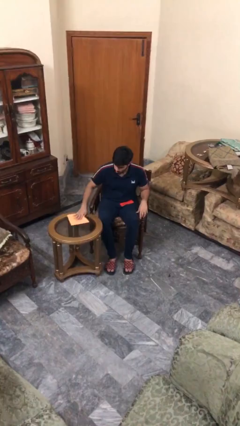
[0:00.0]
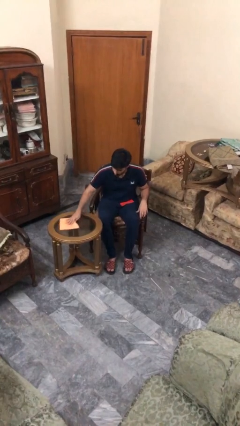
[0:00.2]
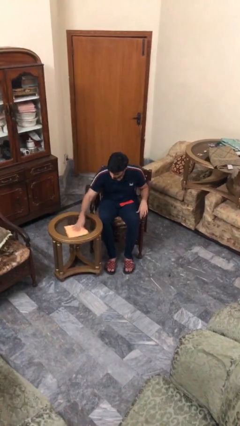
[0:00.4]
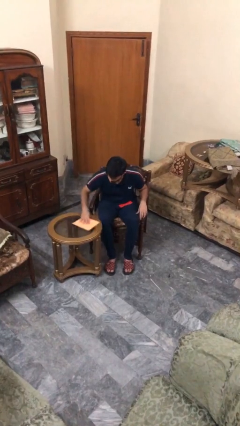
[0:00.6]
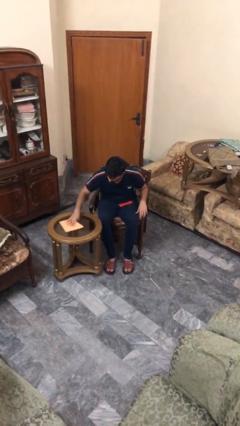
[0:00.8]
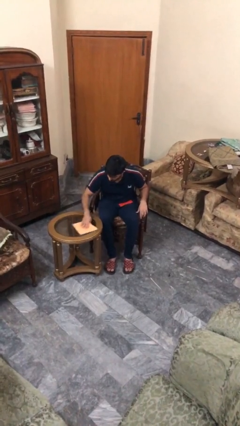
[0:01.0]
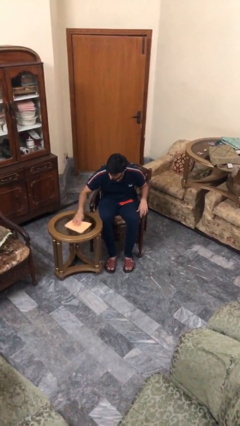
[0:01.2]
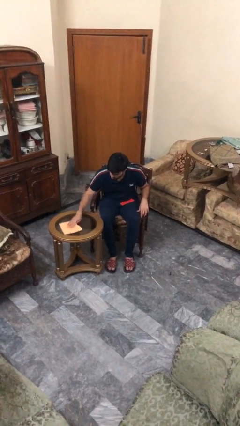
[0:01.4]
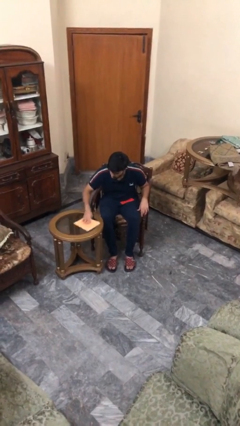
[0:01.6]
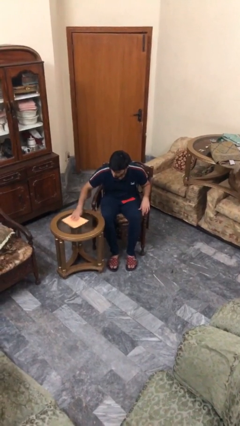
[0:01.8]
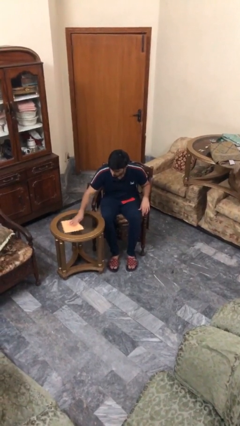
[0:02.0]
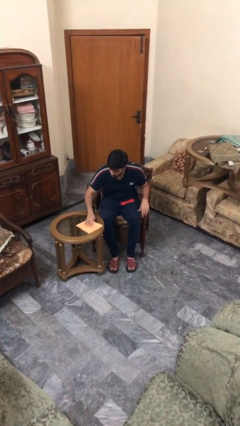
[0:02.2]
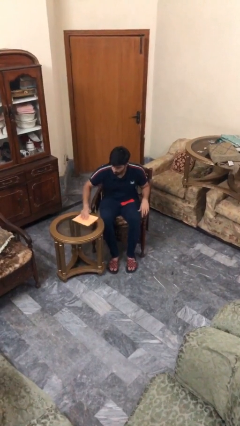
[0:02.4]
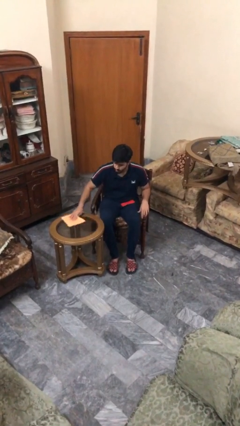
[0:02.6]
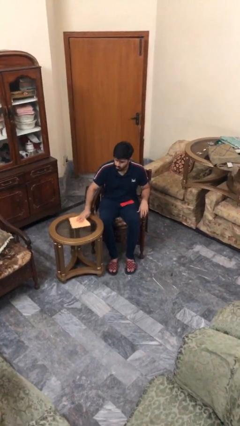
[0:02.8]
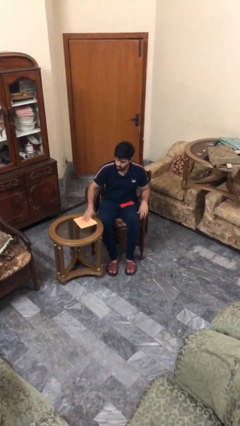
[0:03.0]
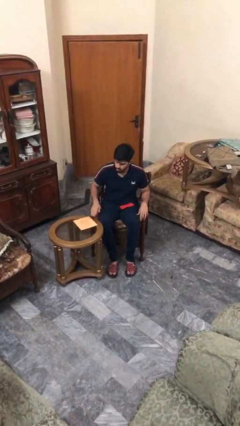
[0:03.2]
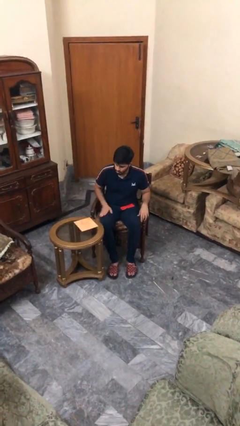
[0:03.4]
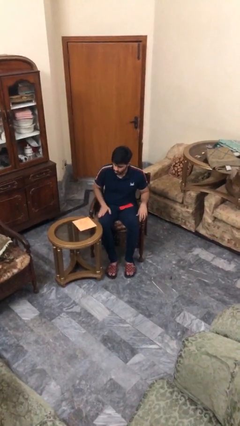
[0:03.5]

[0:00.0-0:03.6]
person cleans table with rag

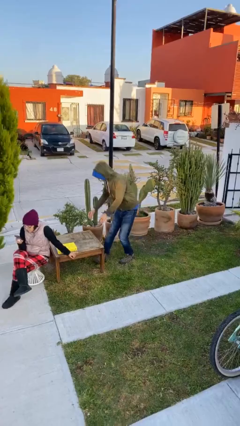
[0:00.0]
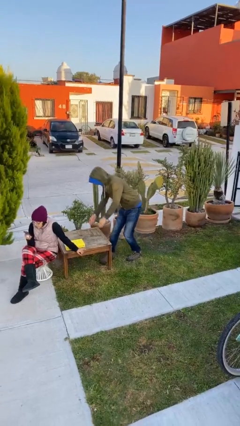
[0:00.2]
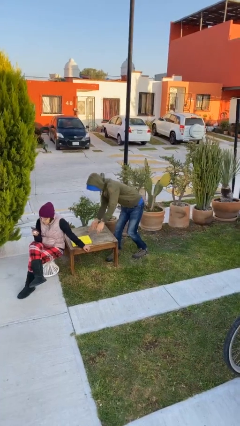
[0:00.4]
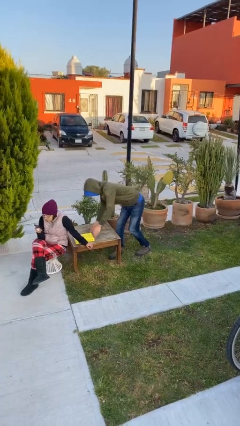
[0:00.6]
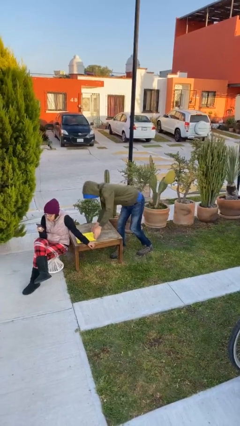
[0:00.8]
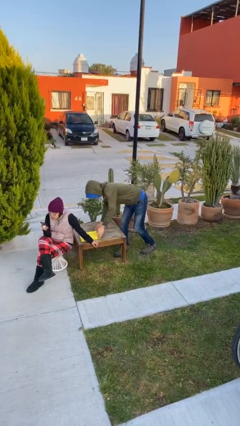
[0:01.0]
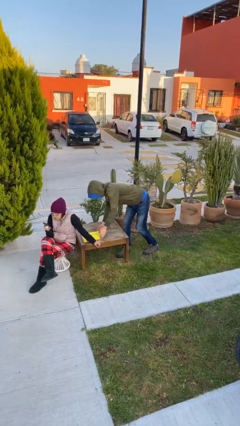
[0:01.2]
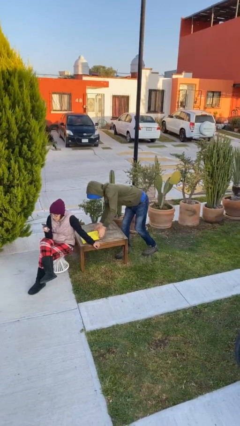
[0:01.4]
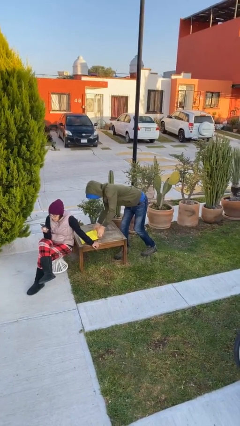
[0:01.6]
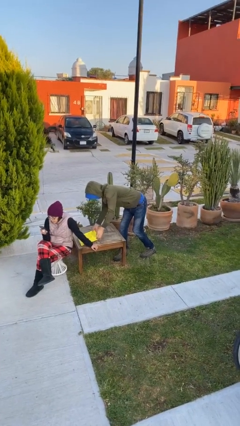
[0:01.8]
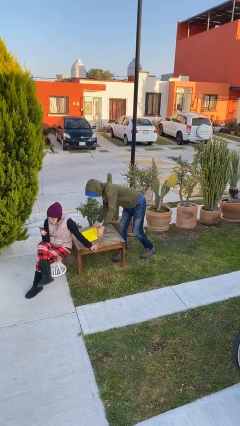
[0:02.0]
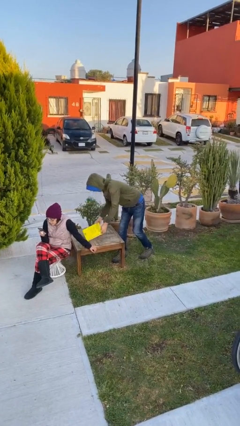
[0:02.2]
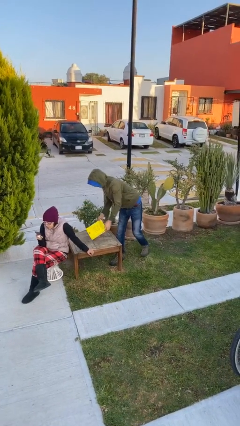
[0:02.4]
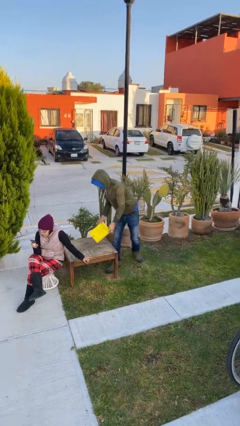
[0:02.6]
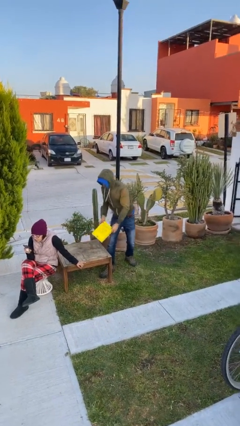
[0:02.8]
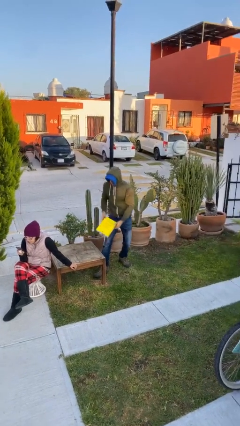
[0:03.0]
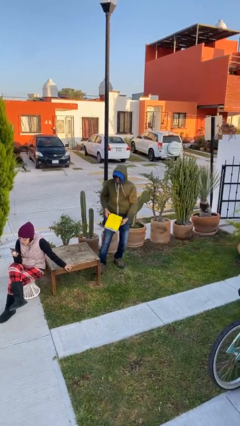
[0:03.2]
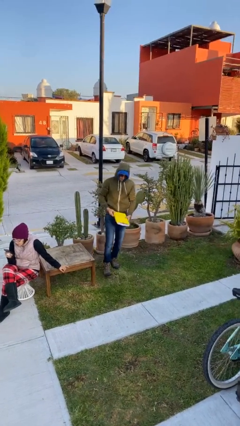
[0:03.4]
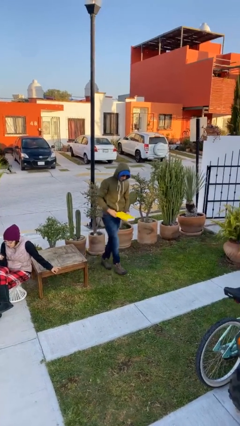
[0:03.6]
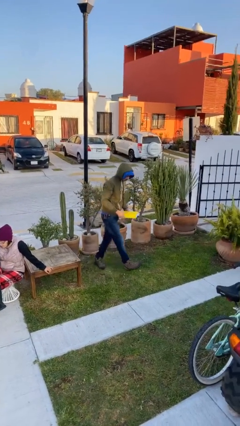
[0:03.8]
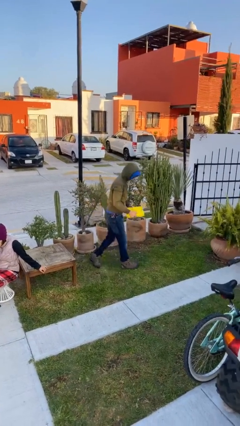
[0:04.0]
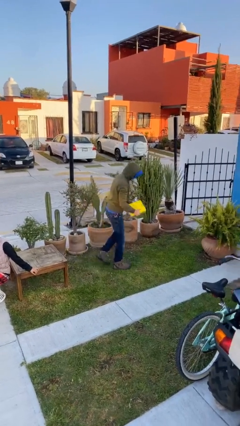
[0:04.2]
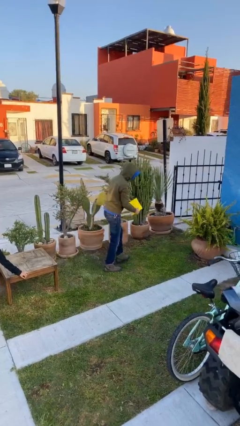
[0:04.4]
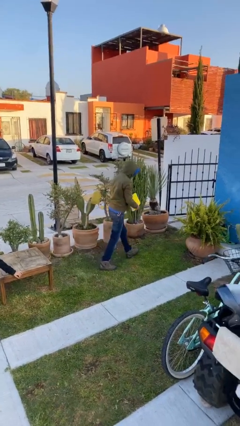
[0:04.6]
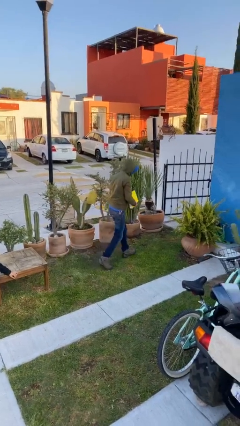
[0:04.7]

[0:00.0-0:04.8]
person steals object from person

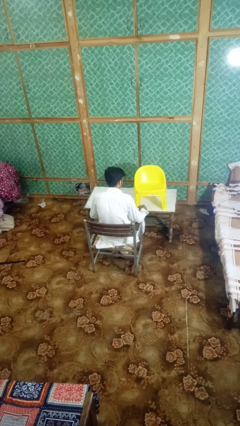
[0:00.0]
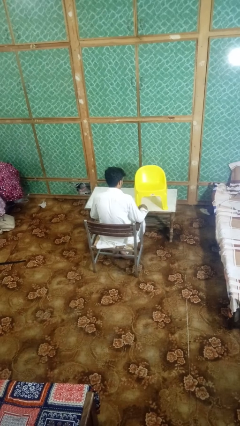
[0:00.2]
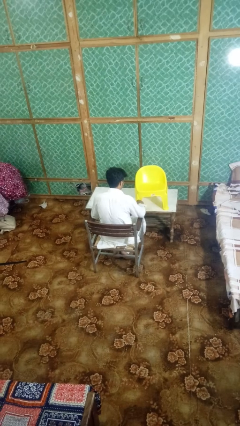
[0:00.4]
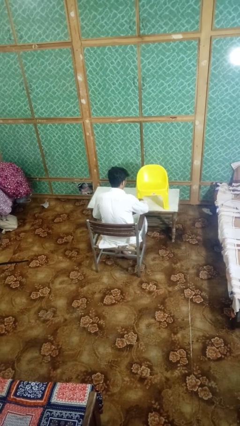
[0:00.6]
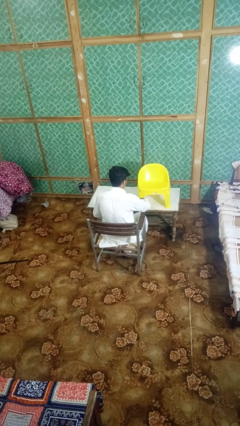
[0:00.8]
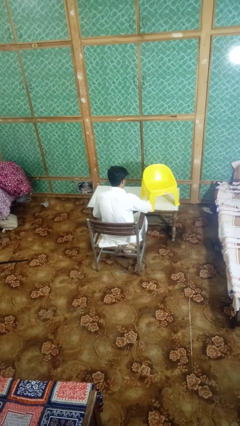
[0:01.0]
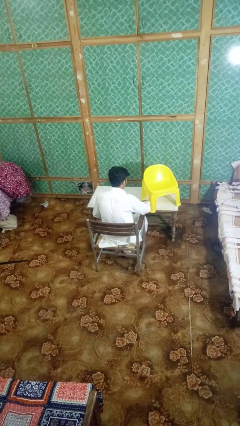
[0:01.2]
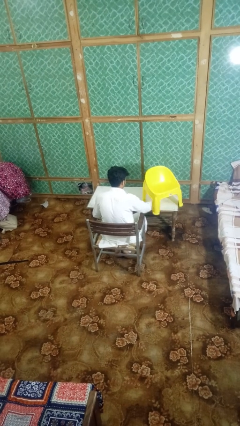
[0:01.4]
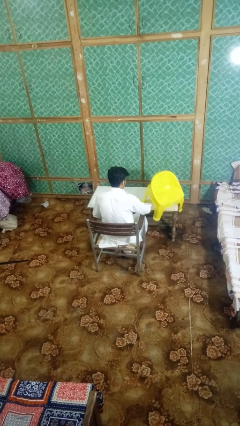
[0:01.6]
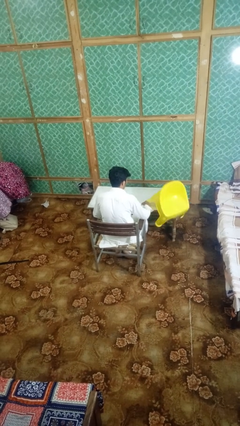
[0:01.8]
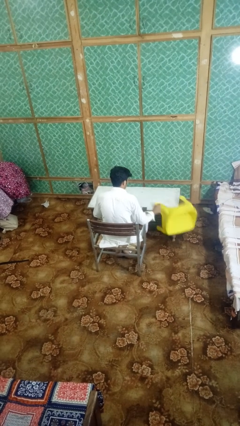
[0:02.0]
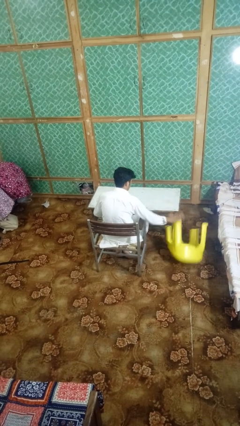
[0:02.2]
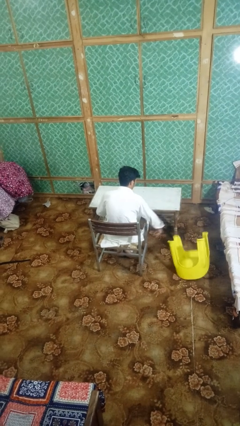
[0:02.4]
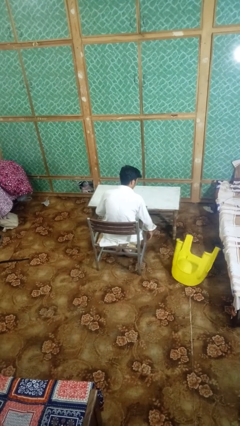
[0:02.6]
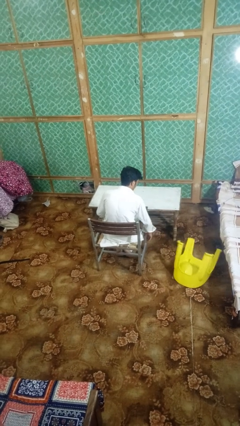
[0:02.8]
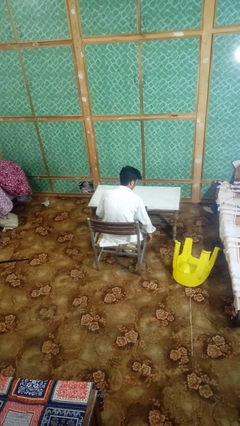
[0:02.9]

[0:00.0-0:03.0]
person knocks over furniture

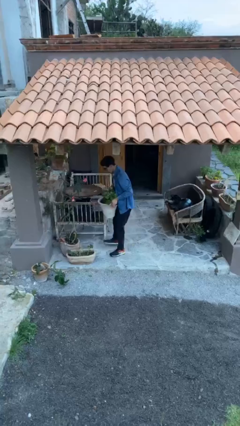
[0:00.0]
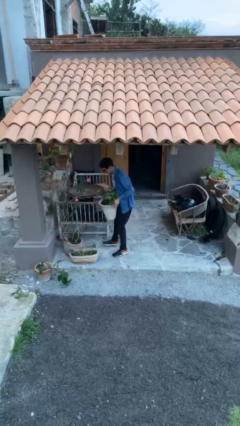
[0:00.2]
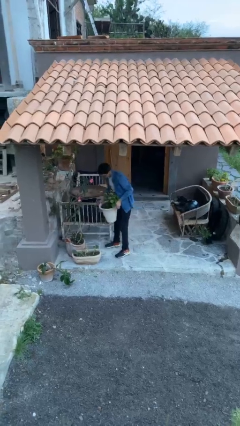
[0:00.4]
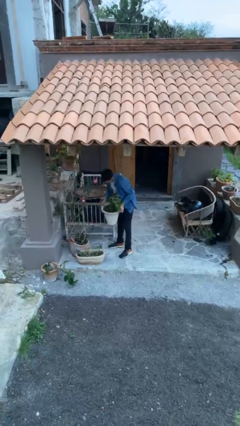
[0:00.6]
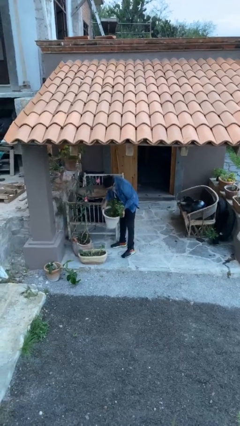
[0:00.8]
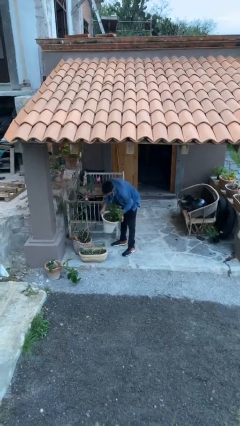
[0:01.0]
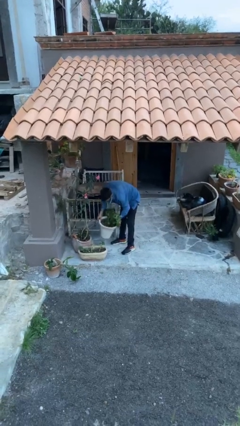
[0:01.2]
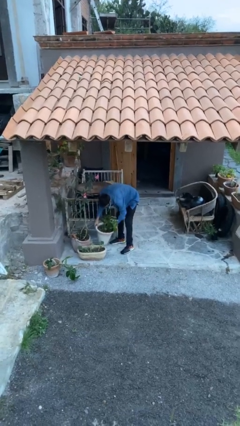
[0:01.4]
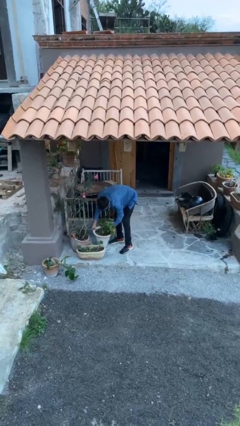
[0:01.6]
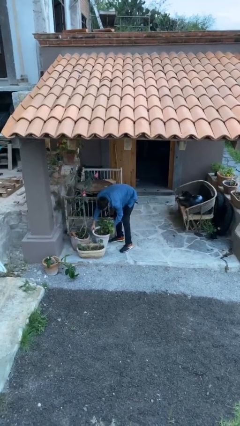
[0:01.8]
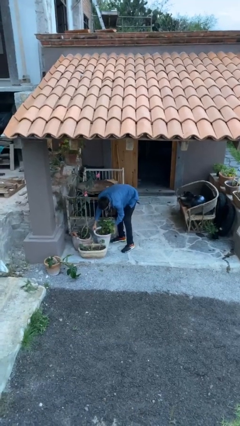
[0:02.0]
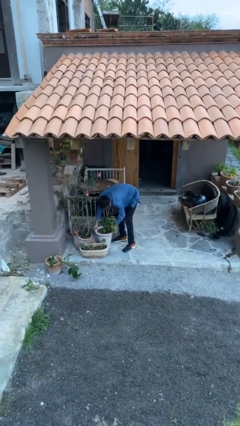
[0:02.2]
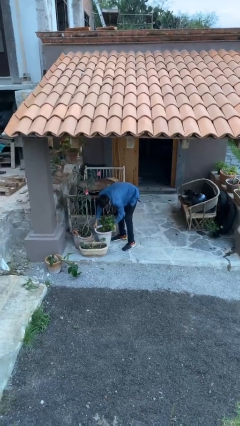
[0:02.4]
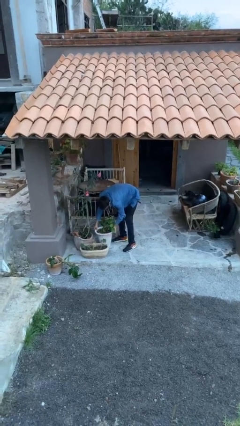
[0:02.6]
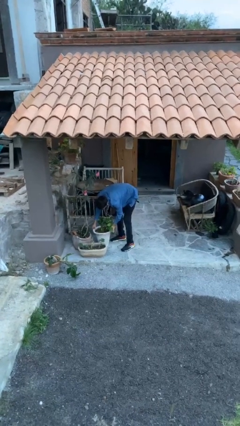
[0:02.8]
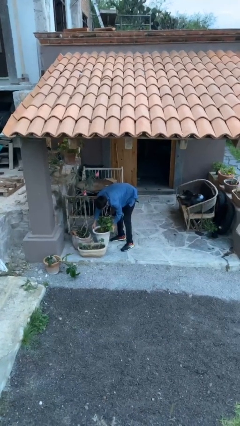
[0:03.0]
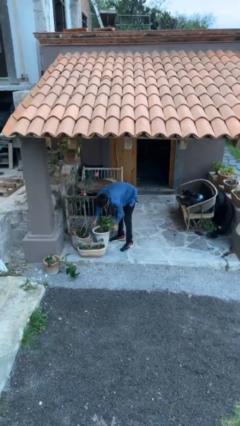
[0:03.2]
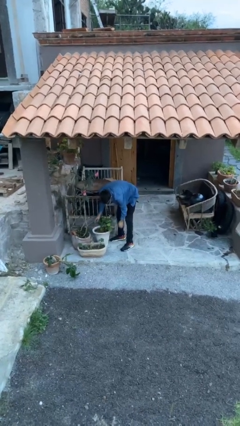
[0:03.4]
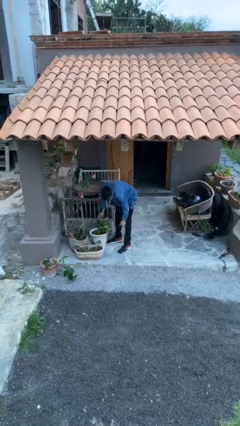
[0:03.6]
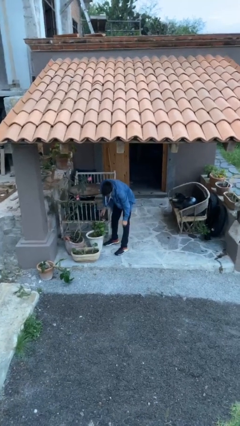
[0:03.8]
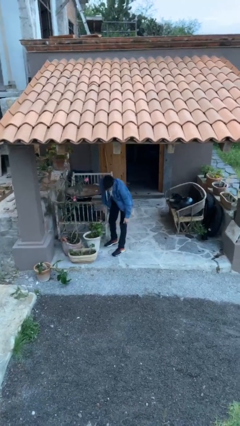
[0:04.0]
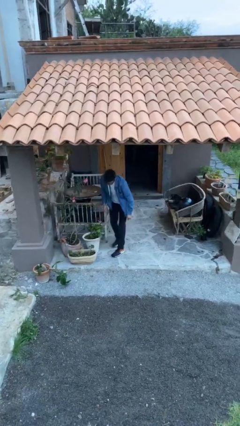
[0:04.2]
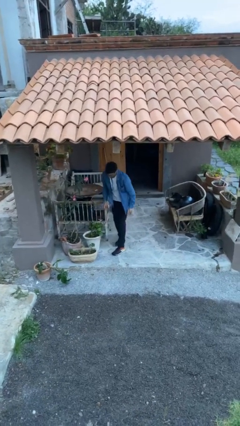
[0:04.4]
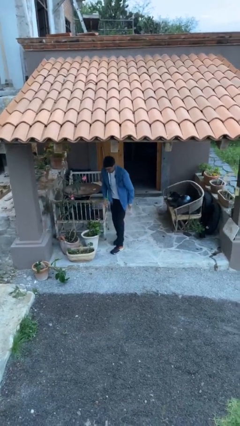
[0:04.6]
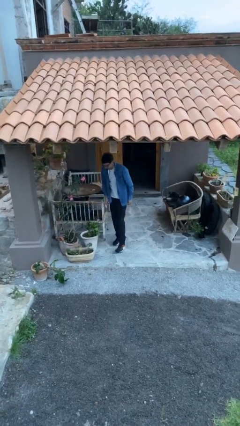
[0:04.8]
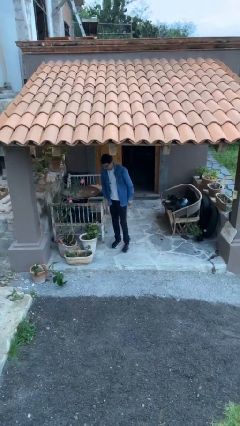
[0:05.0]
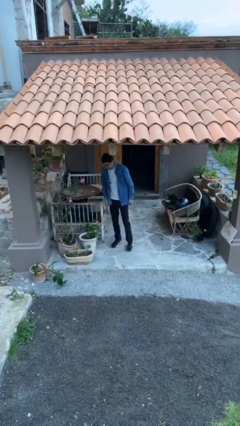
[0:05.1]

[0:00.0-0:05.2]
person puts down object on floor

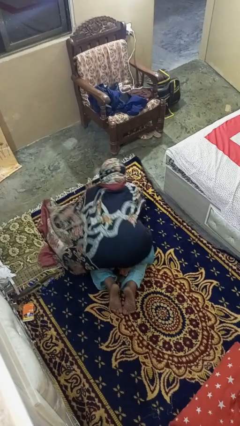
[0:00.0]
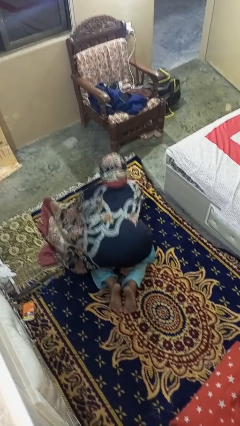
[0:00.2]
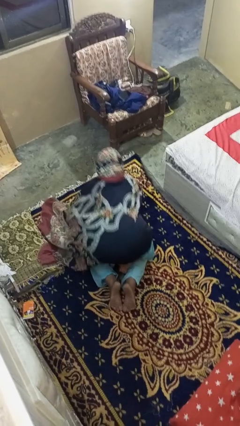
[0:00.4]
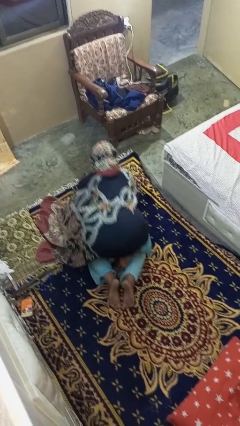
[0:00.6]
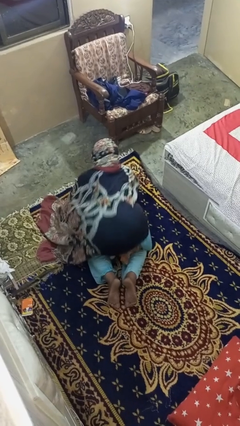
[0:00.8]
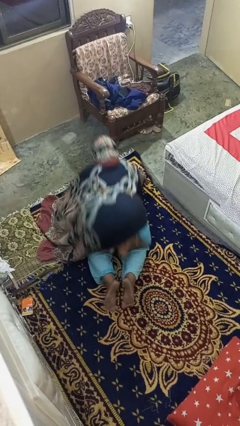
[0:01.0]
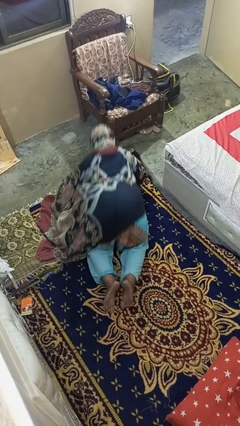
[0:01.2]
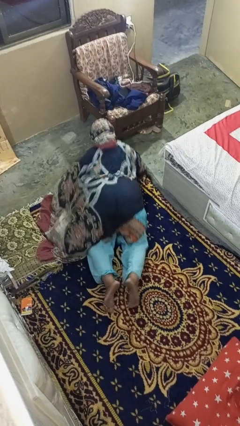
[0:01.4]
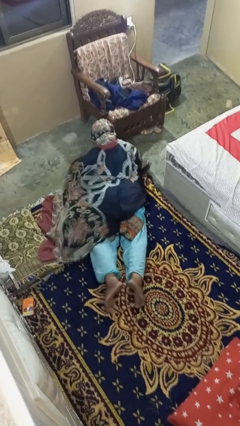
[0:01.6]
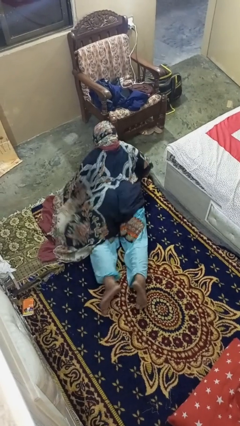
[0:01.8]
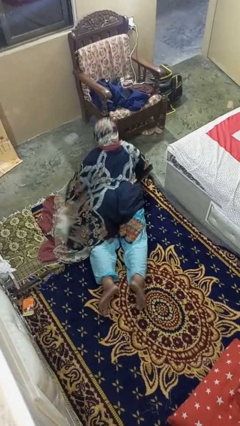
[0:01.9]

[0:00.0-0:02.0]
person exercises with pushup
